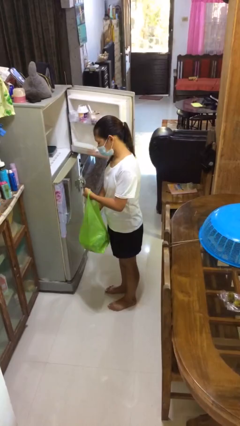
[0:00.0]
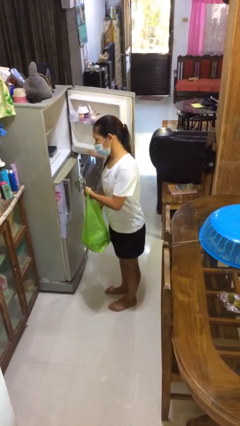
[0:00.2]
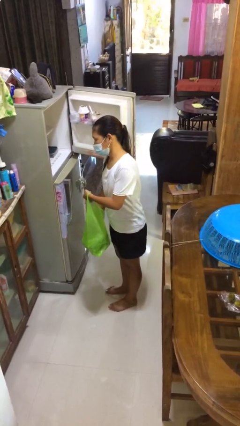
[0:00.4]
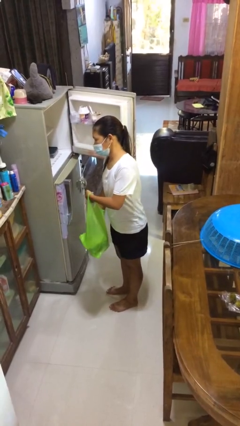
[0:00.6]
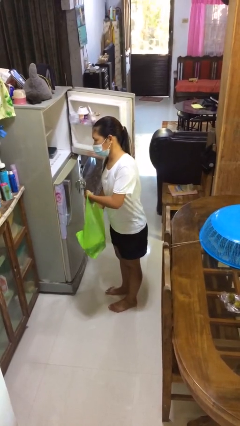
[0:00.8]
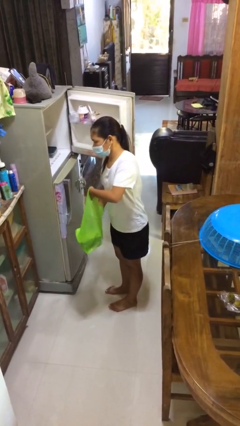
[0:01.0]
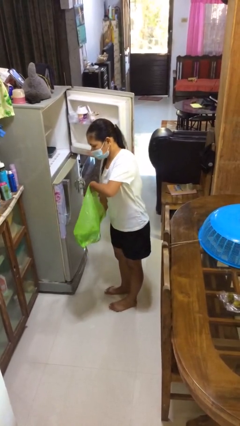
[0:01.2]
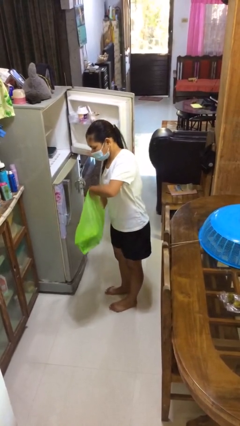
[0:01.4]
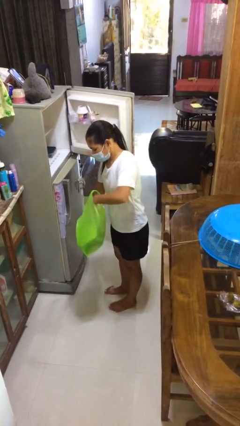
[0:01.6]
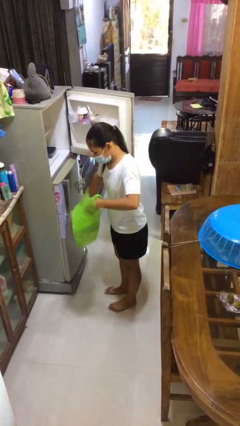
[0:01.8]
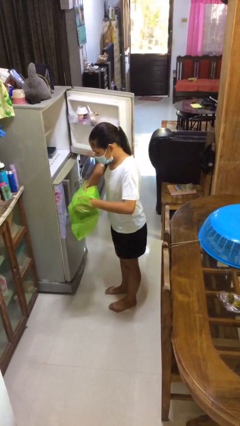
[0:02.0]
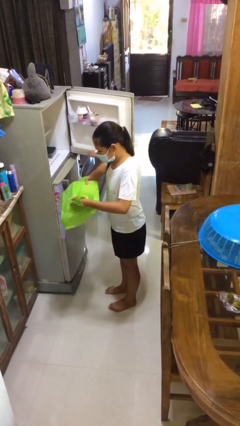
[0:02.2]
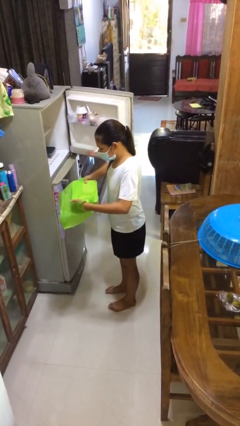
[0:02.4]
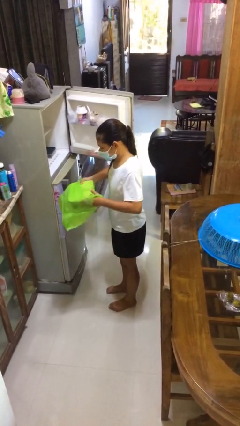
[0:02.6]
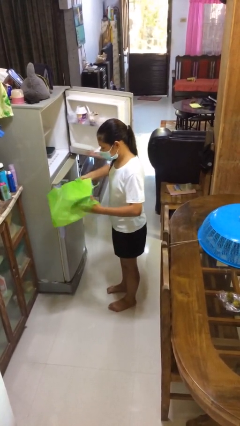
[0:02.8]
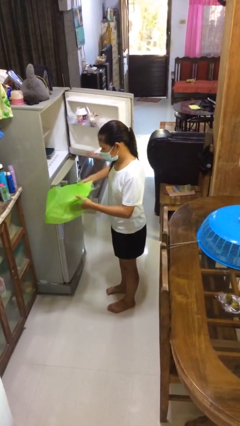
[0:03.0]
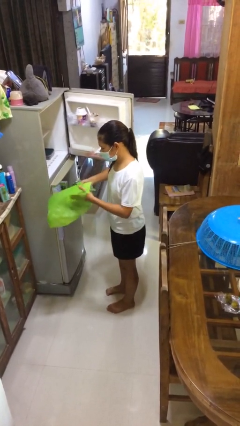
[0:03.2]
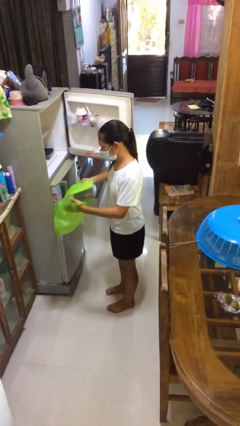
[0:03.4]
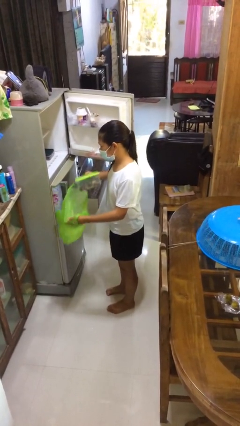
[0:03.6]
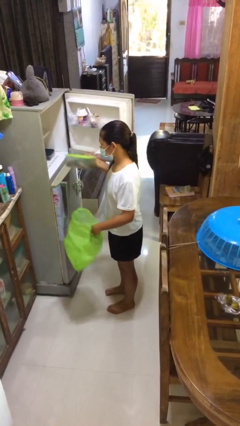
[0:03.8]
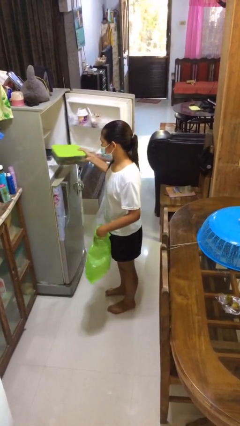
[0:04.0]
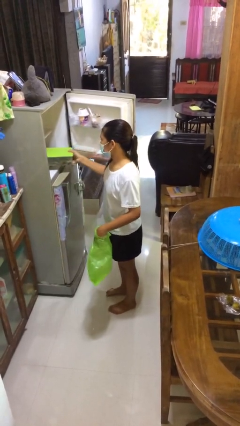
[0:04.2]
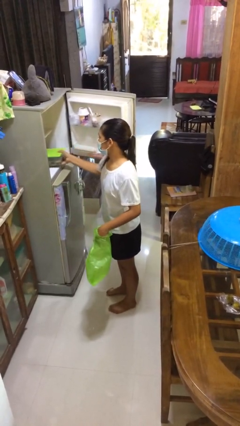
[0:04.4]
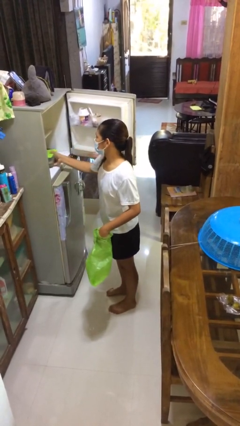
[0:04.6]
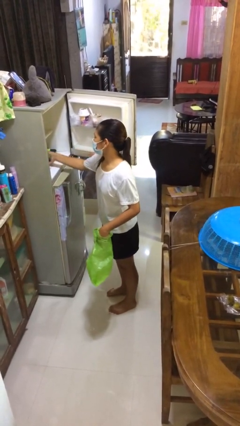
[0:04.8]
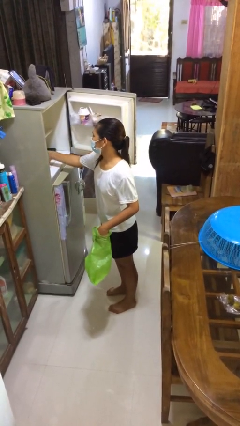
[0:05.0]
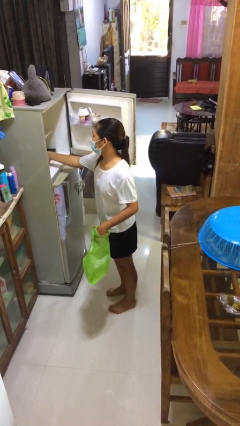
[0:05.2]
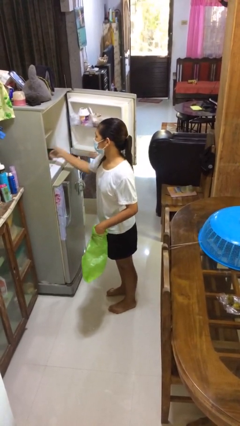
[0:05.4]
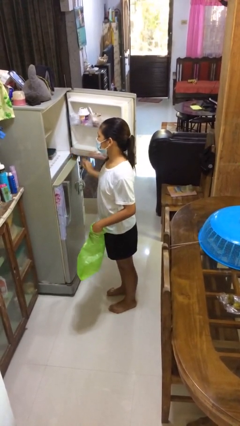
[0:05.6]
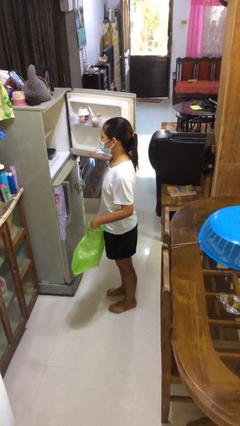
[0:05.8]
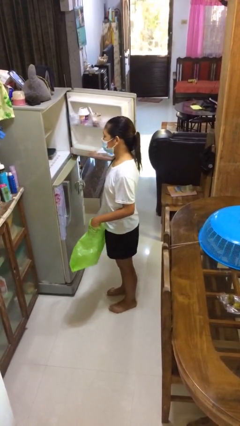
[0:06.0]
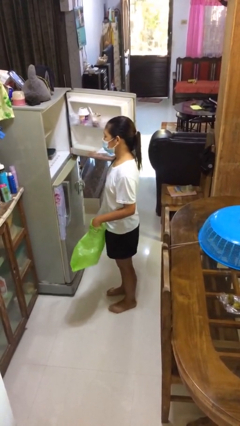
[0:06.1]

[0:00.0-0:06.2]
person loads groceries into refrigerator

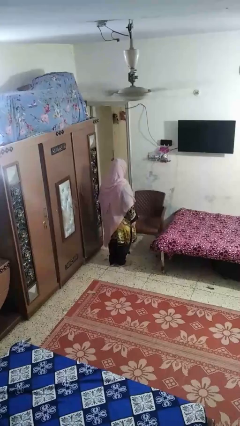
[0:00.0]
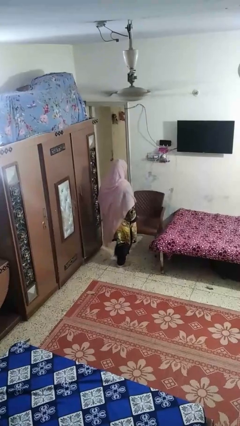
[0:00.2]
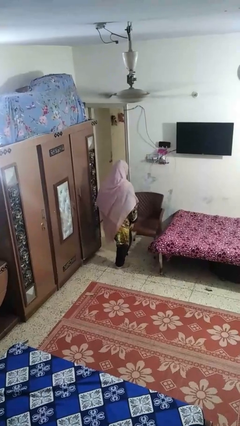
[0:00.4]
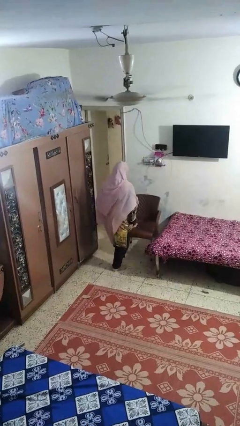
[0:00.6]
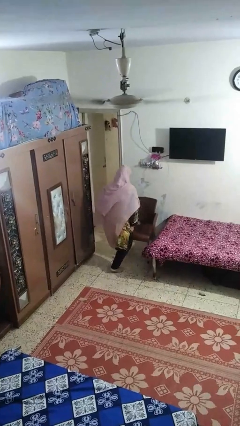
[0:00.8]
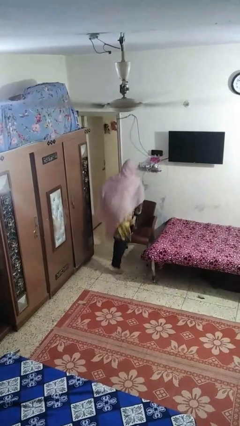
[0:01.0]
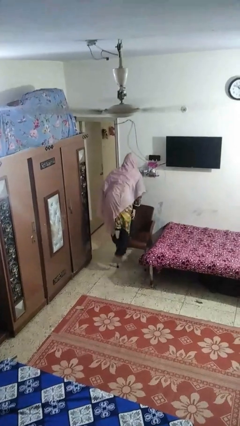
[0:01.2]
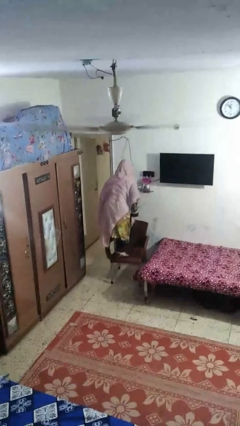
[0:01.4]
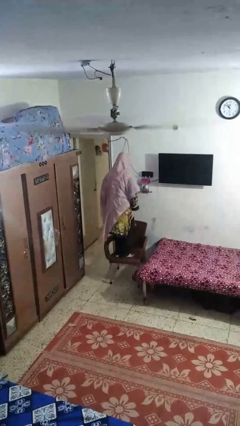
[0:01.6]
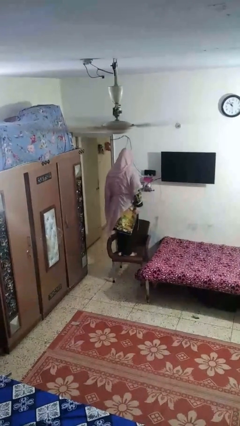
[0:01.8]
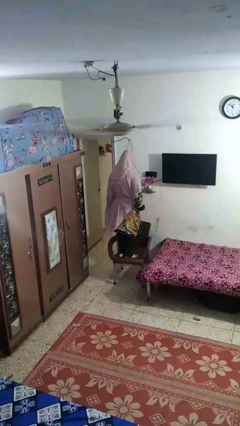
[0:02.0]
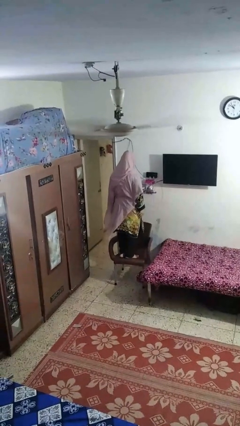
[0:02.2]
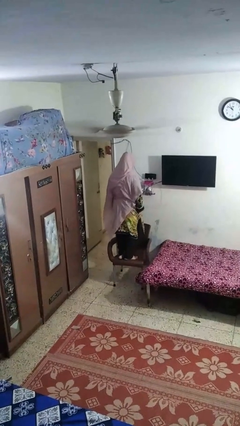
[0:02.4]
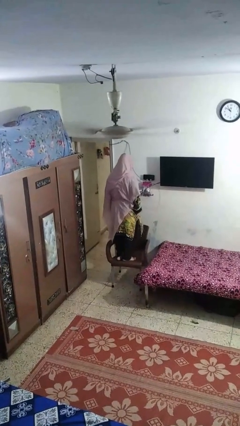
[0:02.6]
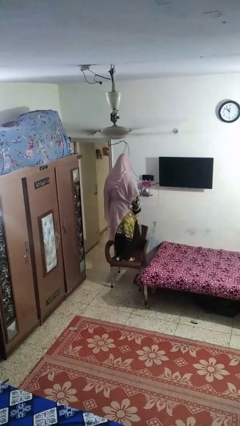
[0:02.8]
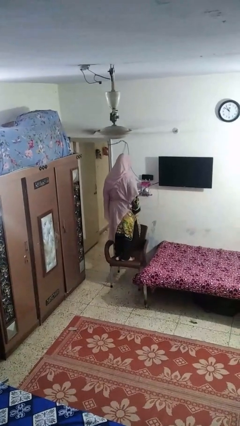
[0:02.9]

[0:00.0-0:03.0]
person climbs on chair

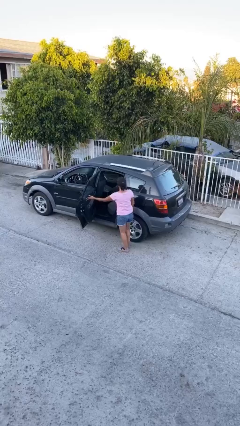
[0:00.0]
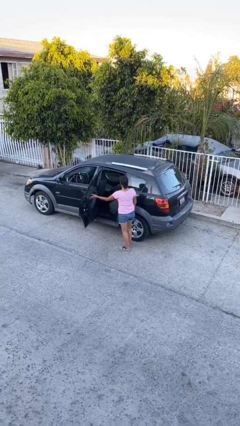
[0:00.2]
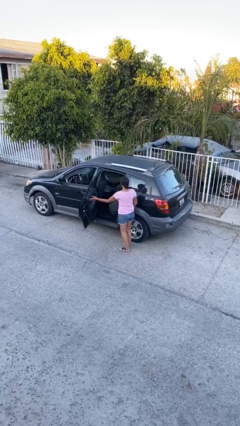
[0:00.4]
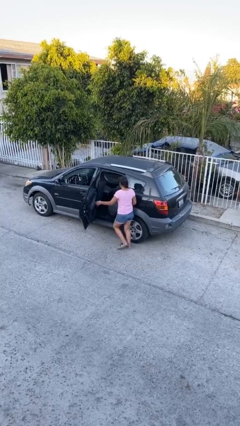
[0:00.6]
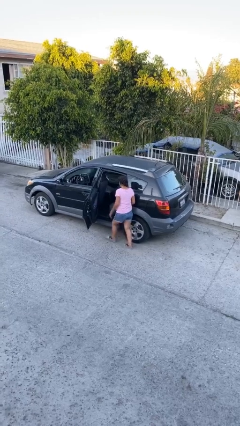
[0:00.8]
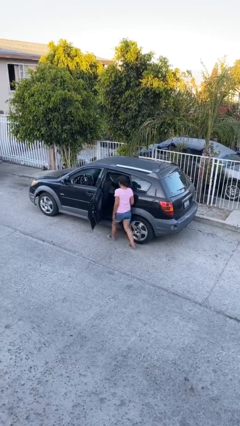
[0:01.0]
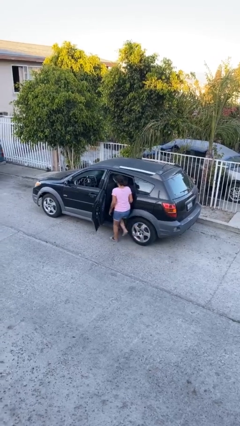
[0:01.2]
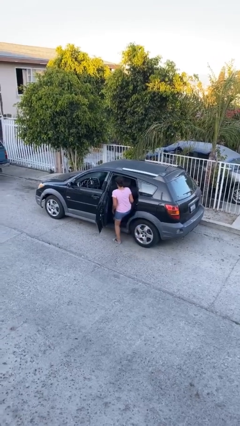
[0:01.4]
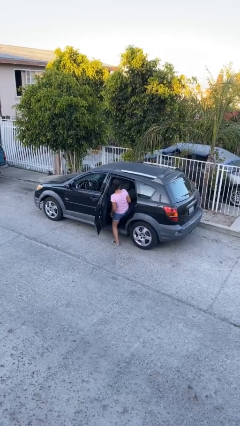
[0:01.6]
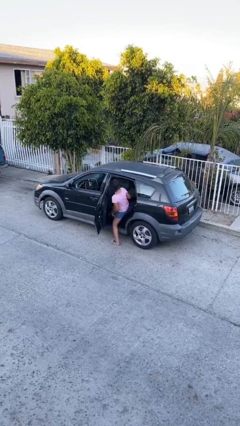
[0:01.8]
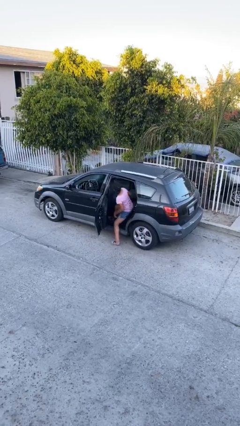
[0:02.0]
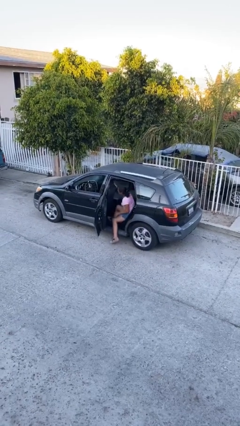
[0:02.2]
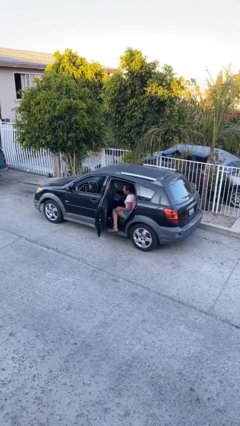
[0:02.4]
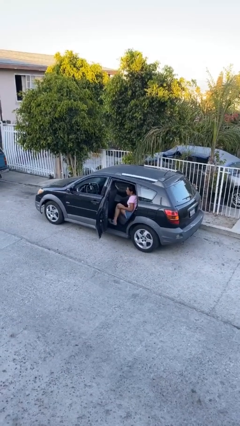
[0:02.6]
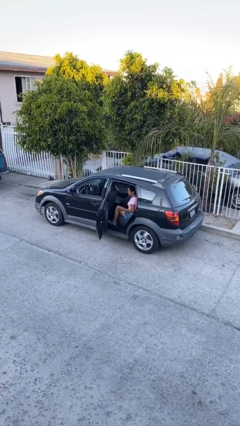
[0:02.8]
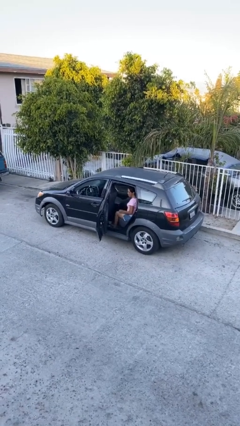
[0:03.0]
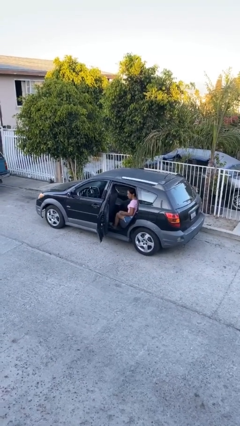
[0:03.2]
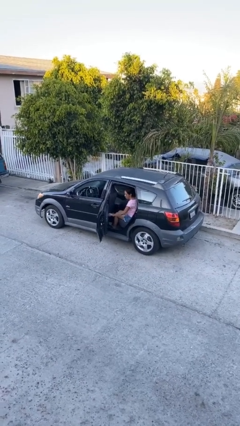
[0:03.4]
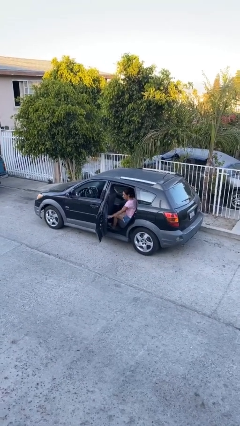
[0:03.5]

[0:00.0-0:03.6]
person enters car

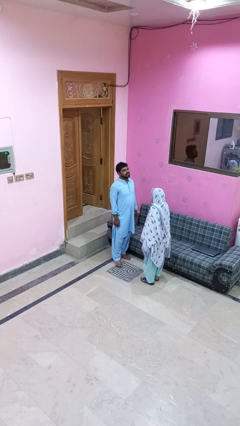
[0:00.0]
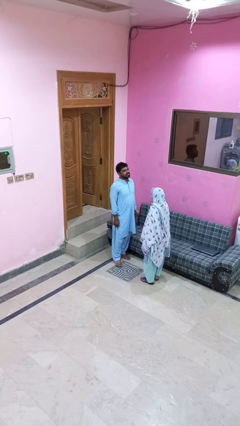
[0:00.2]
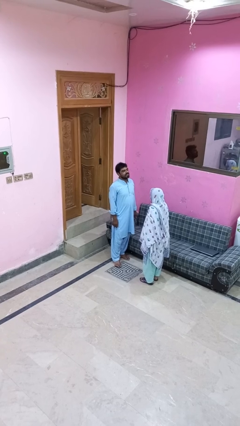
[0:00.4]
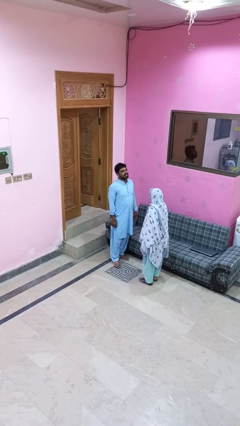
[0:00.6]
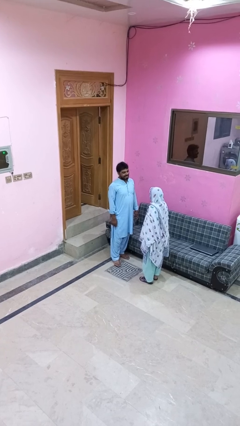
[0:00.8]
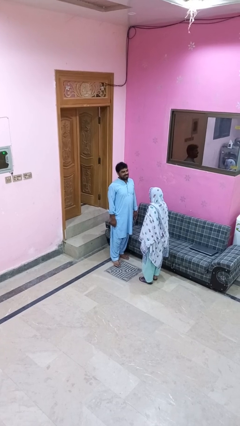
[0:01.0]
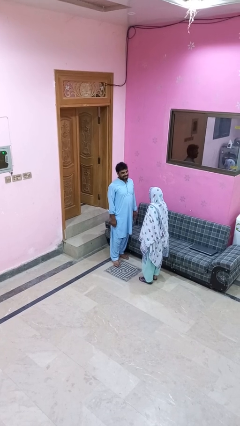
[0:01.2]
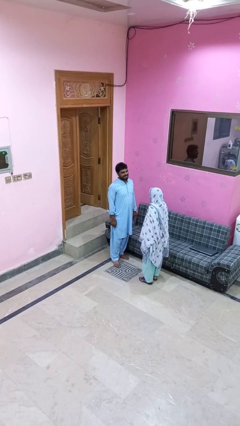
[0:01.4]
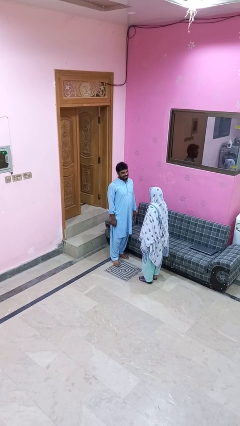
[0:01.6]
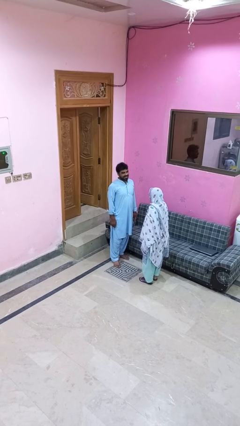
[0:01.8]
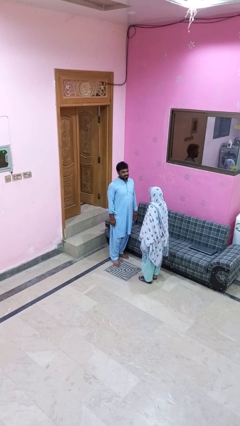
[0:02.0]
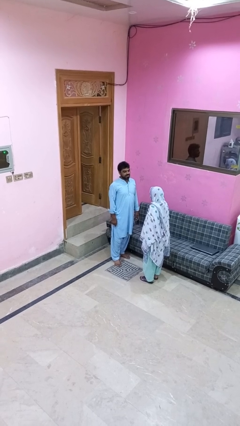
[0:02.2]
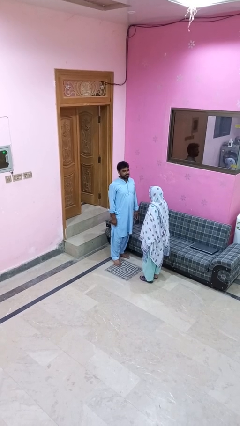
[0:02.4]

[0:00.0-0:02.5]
person laughs with person

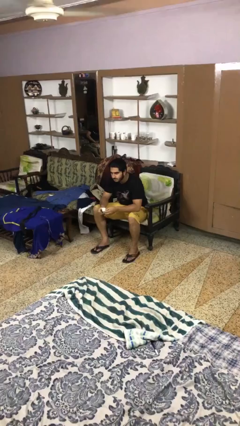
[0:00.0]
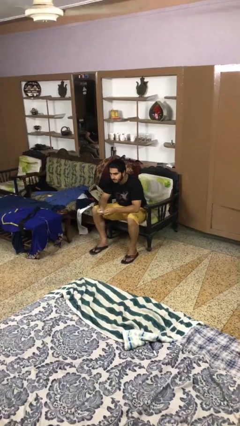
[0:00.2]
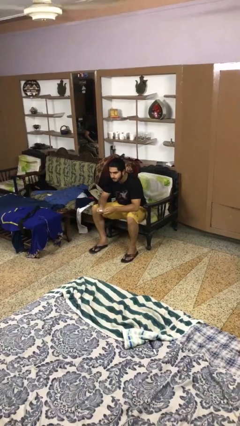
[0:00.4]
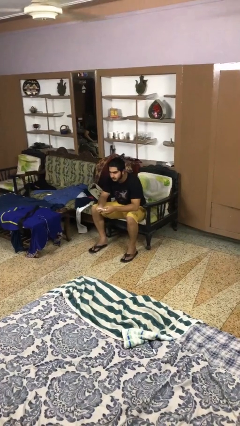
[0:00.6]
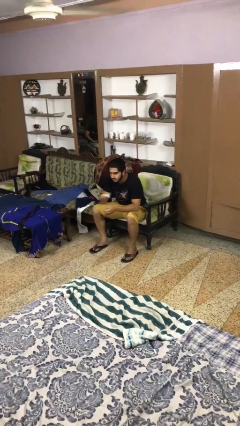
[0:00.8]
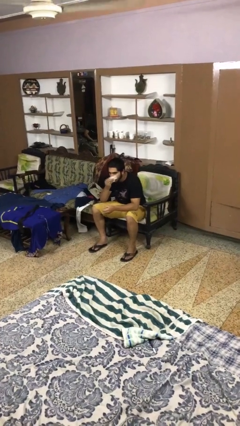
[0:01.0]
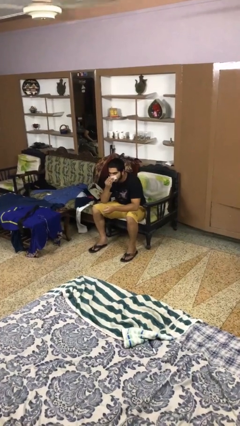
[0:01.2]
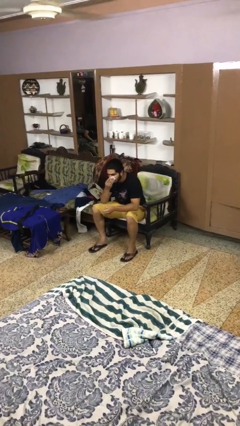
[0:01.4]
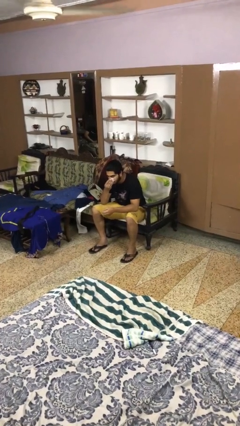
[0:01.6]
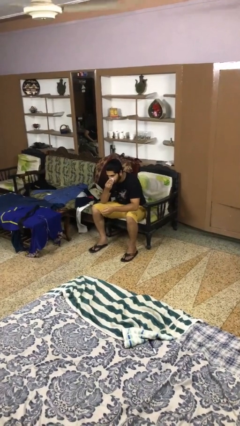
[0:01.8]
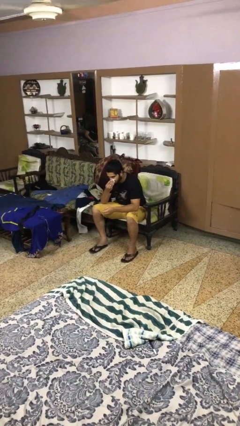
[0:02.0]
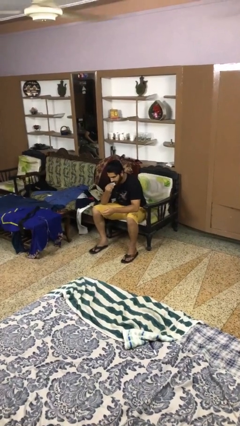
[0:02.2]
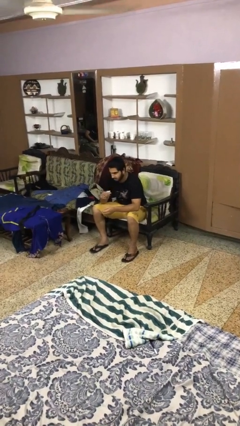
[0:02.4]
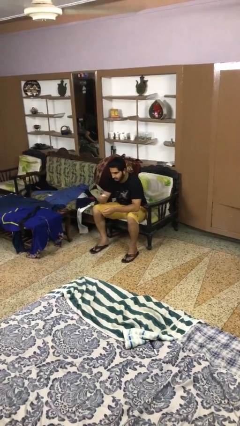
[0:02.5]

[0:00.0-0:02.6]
person blows nose
